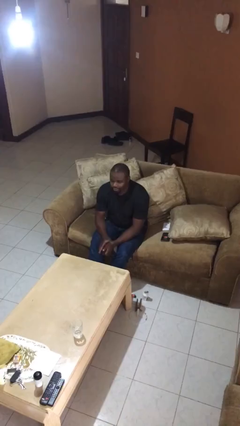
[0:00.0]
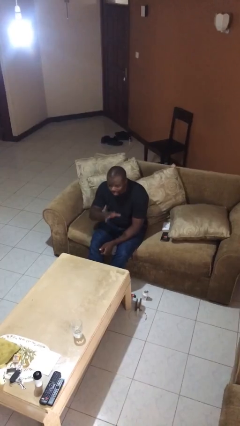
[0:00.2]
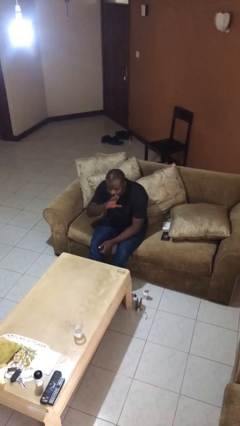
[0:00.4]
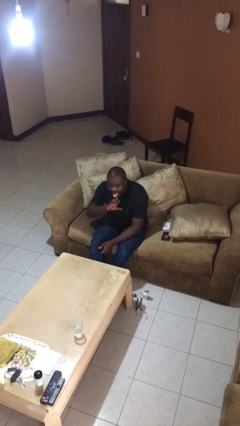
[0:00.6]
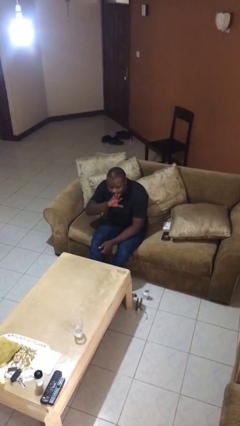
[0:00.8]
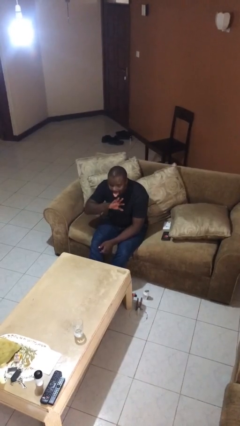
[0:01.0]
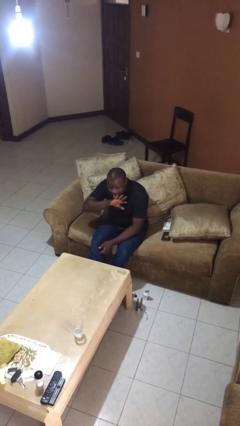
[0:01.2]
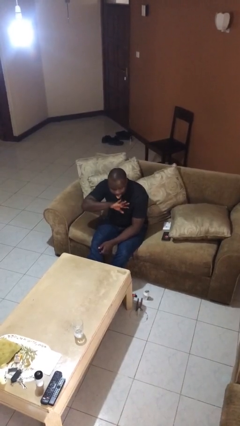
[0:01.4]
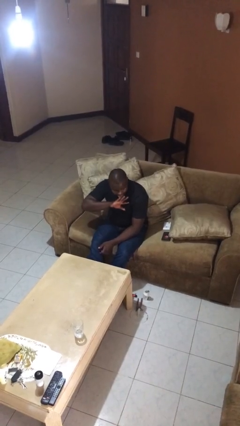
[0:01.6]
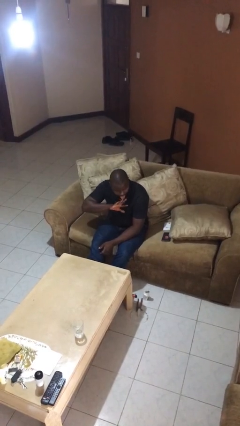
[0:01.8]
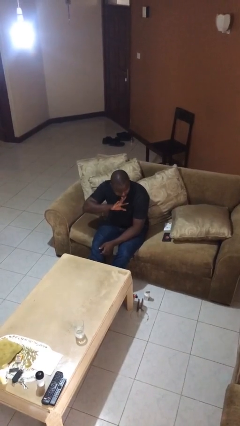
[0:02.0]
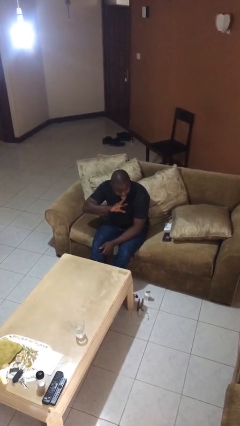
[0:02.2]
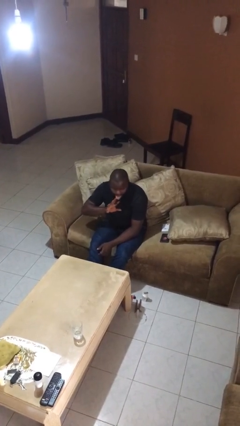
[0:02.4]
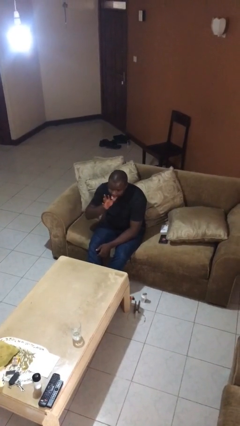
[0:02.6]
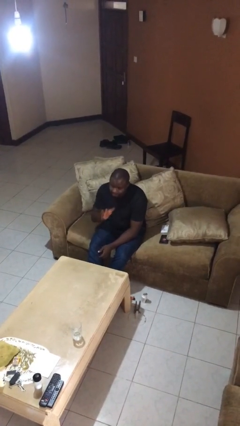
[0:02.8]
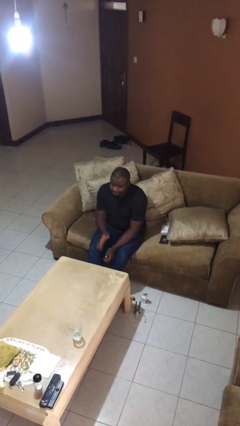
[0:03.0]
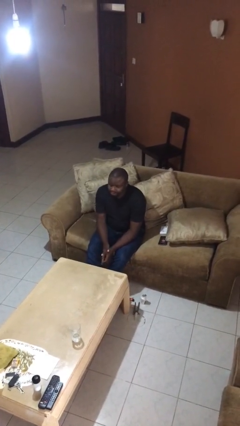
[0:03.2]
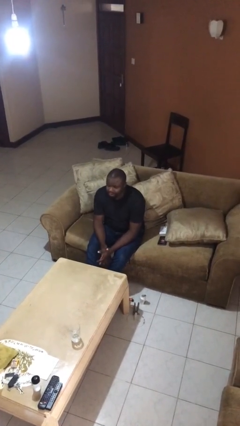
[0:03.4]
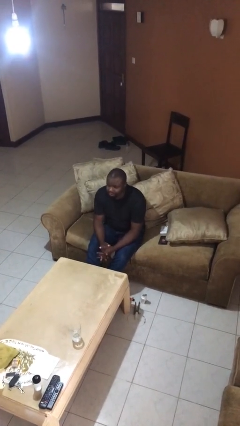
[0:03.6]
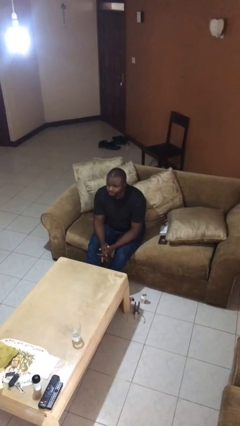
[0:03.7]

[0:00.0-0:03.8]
person licks fingers

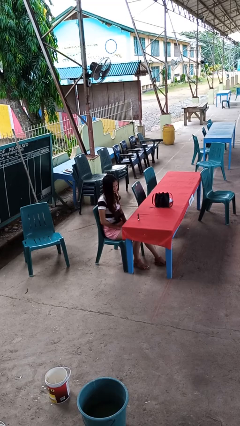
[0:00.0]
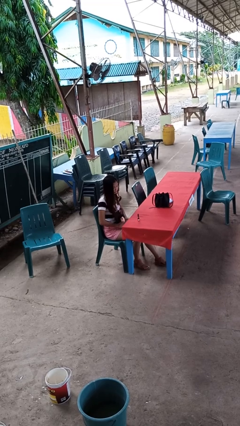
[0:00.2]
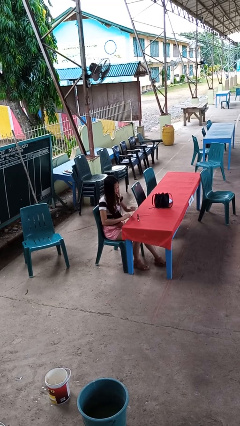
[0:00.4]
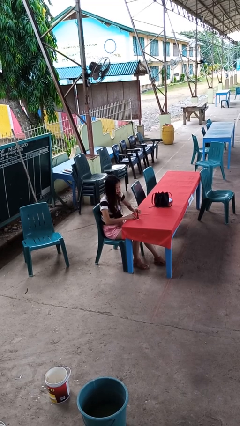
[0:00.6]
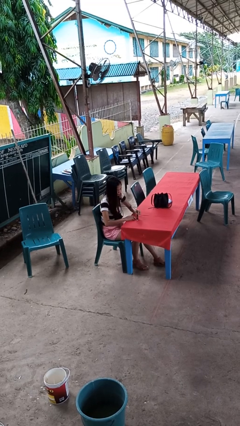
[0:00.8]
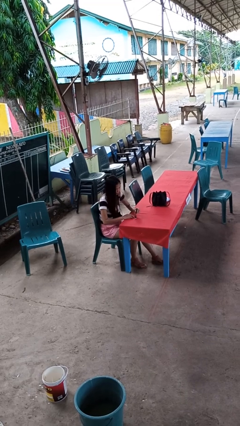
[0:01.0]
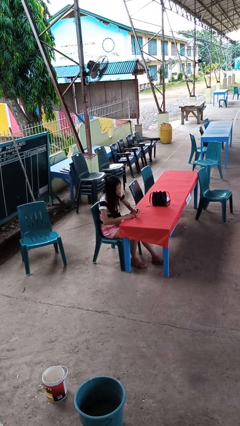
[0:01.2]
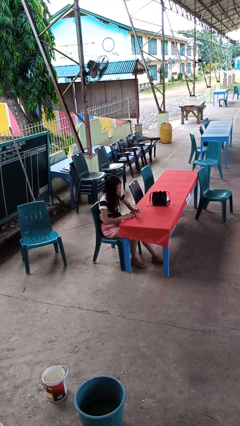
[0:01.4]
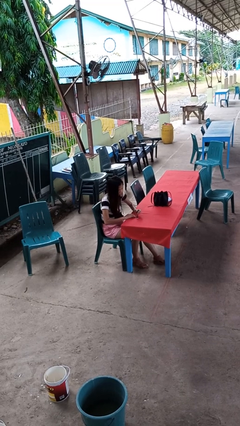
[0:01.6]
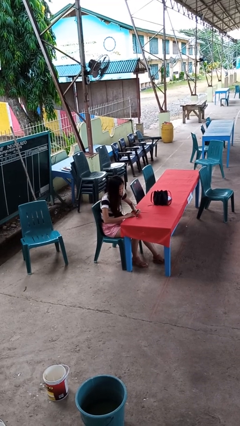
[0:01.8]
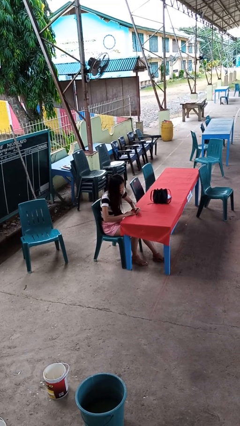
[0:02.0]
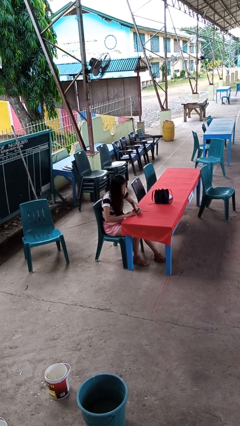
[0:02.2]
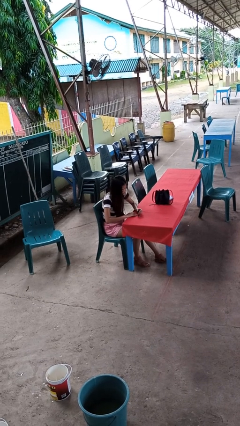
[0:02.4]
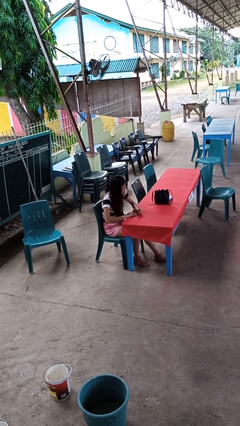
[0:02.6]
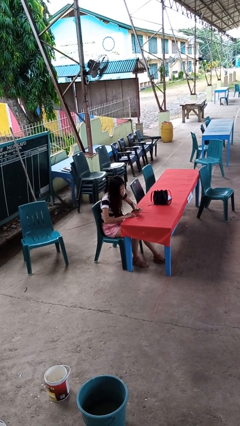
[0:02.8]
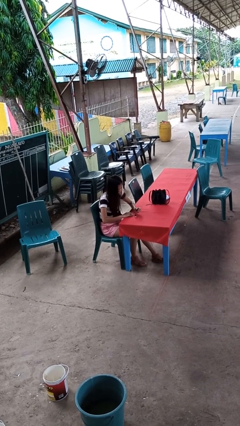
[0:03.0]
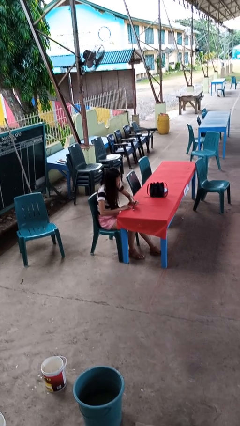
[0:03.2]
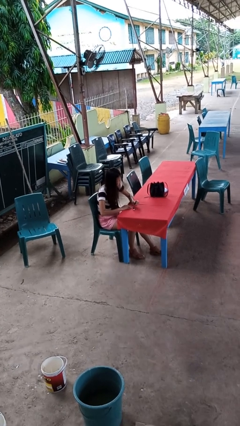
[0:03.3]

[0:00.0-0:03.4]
person paints fingernails

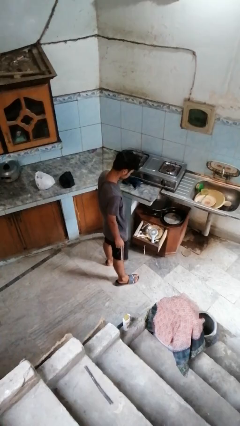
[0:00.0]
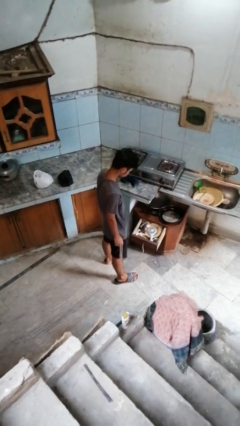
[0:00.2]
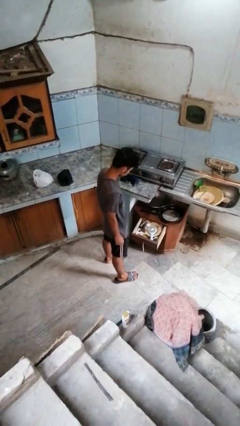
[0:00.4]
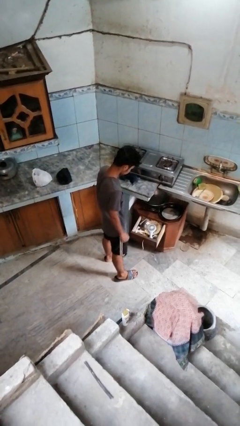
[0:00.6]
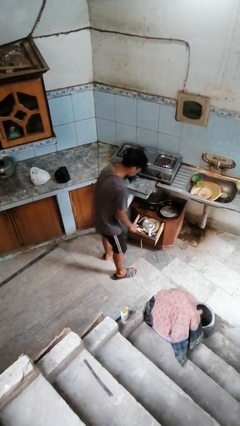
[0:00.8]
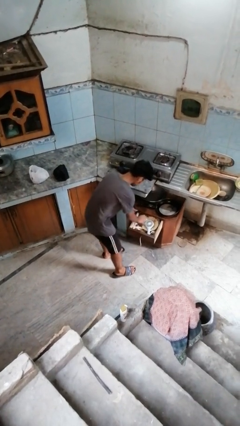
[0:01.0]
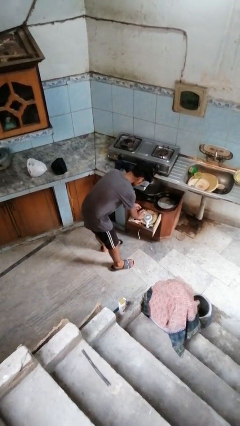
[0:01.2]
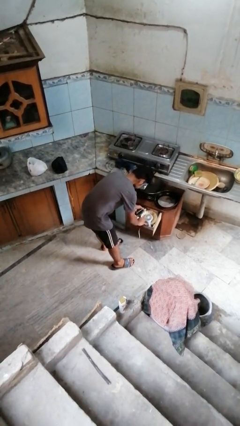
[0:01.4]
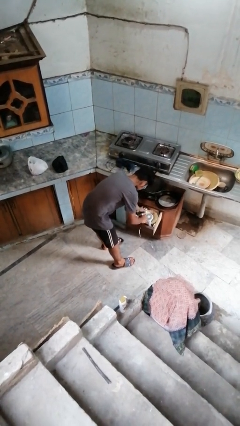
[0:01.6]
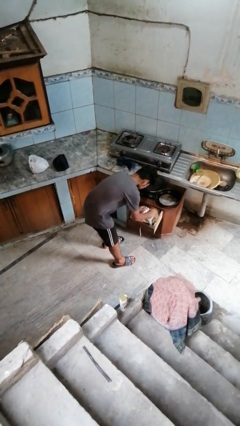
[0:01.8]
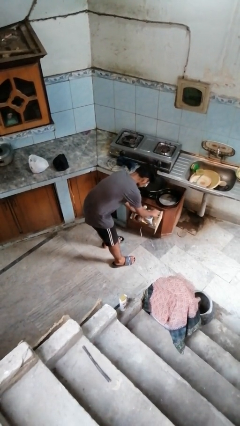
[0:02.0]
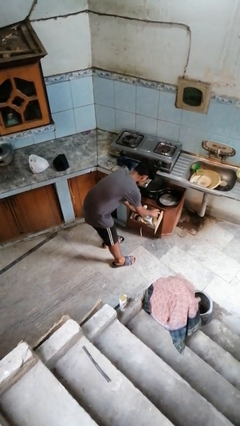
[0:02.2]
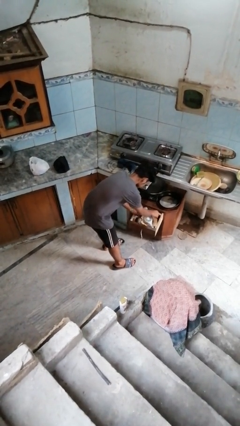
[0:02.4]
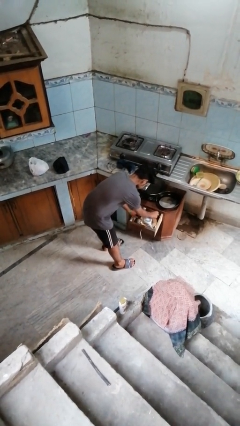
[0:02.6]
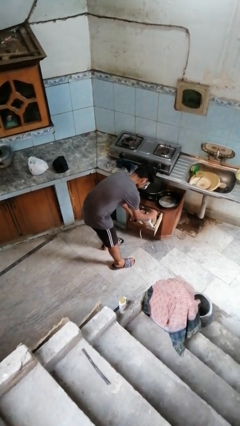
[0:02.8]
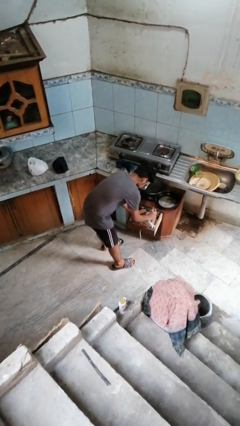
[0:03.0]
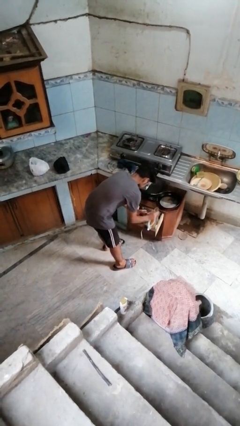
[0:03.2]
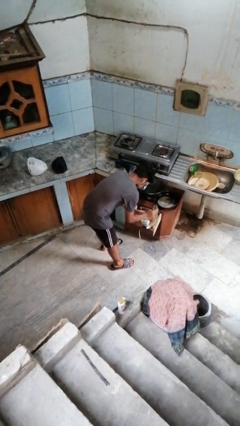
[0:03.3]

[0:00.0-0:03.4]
person searches in kitchen drawer

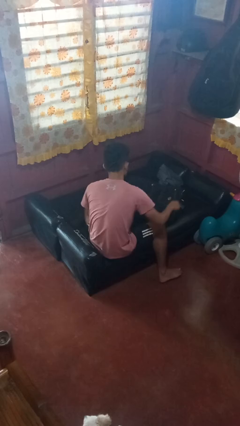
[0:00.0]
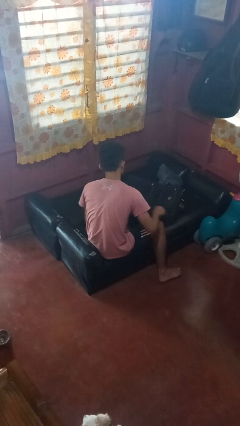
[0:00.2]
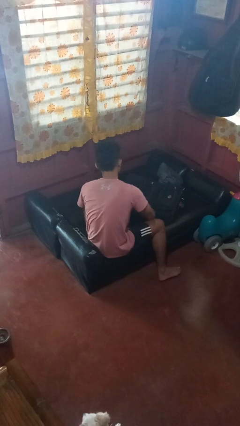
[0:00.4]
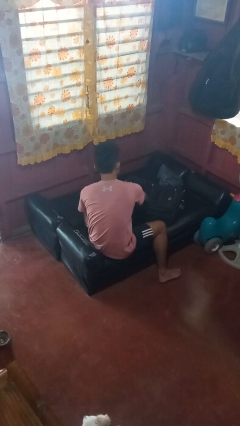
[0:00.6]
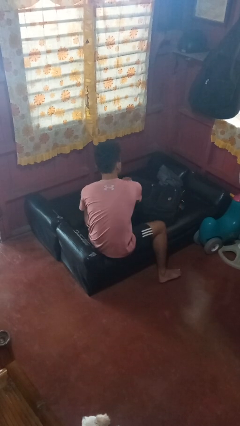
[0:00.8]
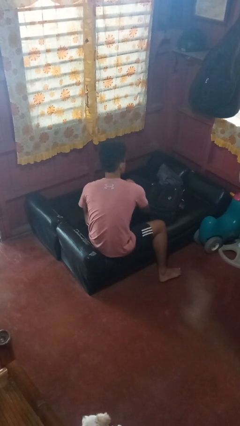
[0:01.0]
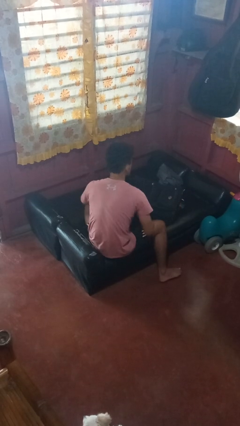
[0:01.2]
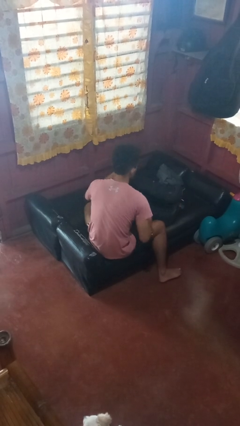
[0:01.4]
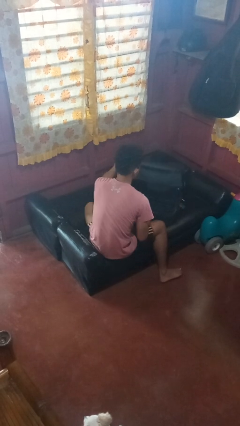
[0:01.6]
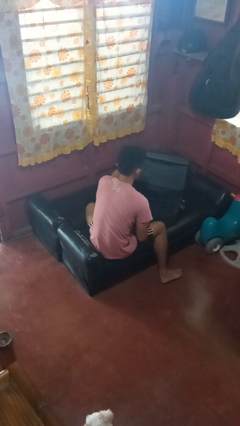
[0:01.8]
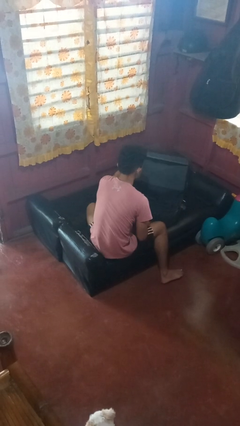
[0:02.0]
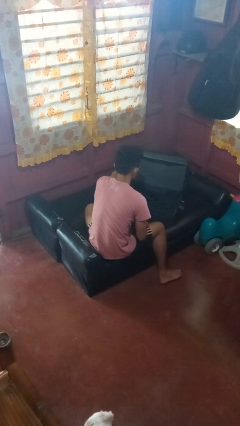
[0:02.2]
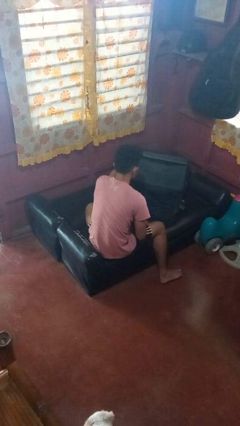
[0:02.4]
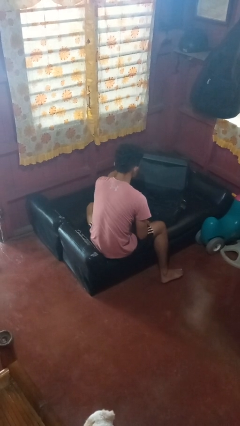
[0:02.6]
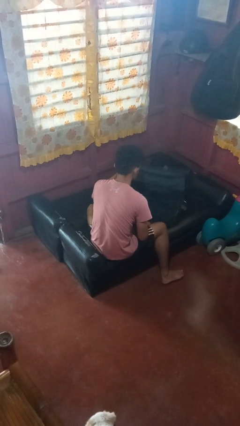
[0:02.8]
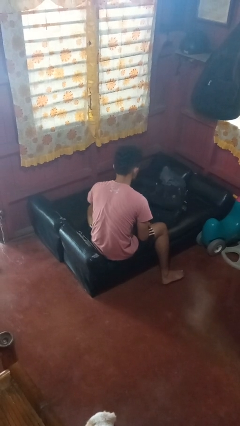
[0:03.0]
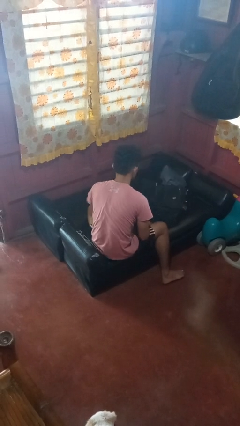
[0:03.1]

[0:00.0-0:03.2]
person opens suitcase

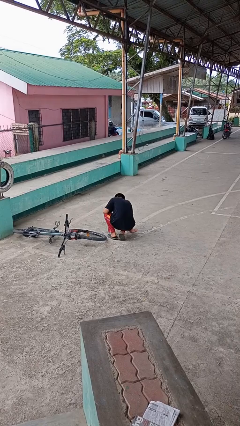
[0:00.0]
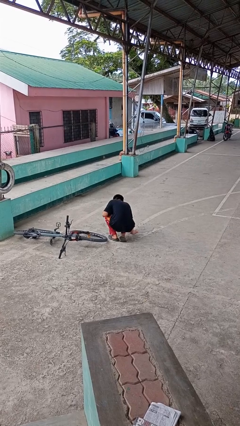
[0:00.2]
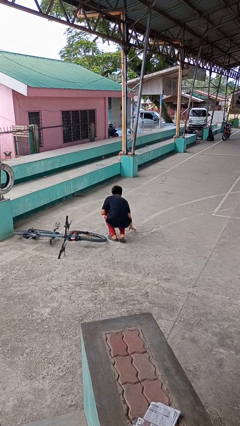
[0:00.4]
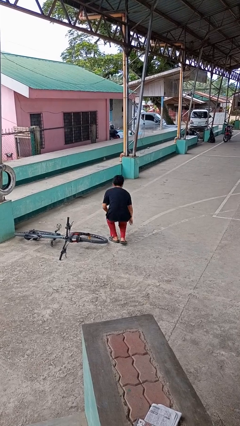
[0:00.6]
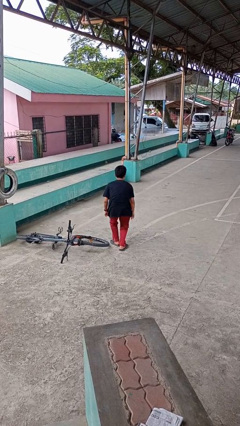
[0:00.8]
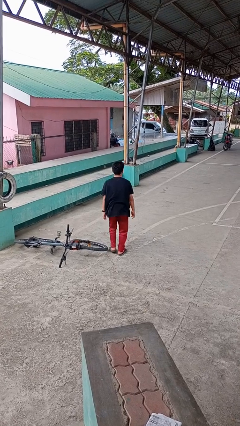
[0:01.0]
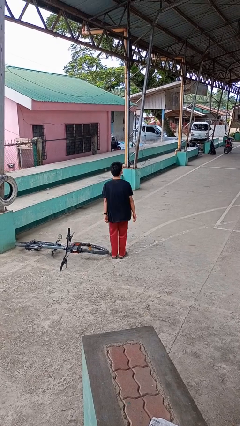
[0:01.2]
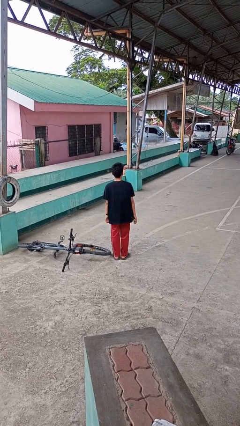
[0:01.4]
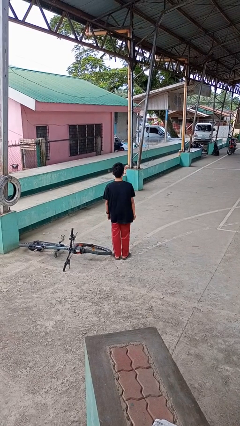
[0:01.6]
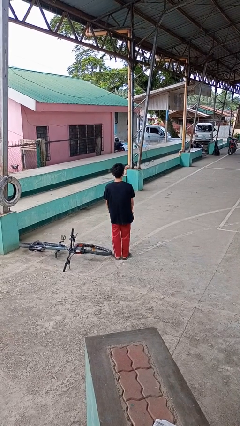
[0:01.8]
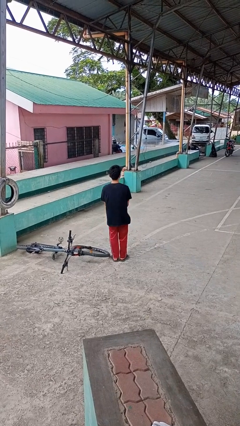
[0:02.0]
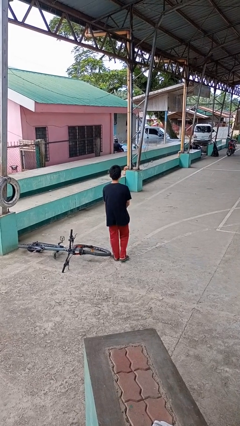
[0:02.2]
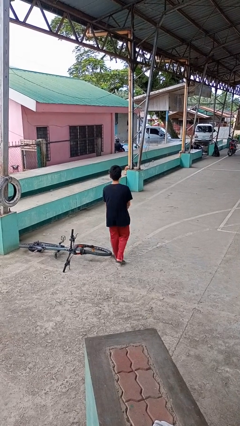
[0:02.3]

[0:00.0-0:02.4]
person stands up from floor

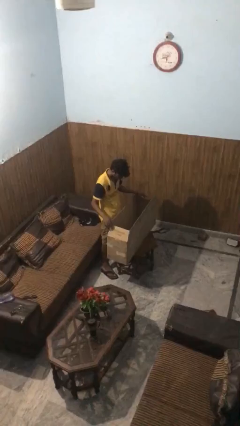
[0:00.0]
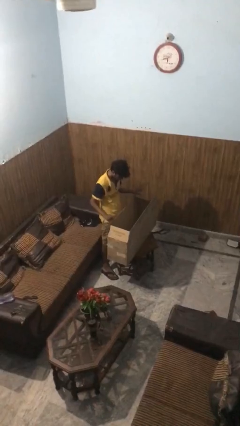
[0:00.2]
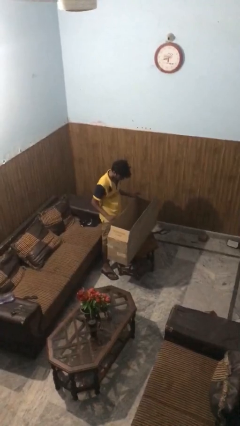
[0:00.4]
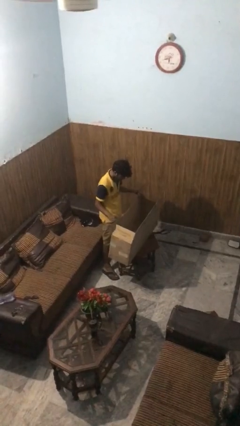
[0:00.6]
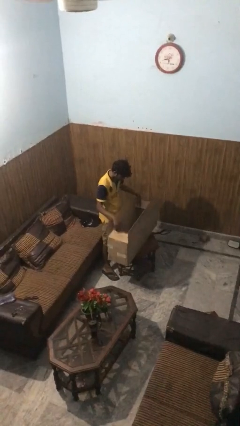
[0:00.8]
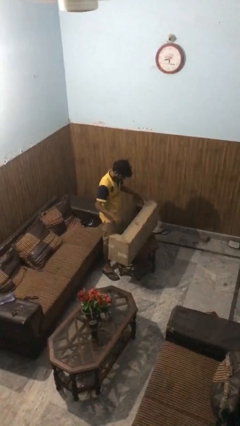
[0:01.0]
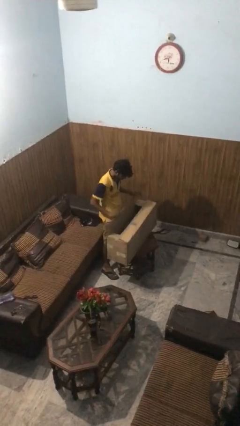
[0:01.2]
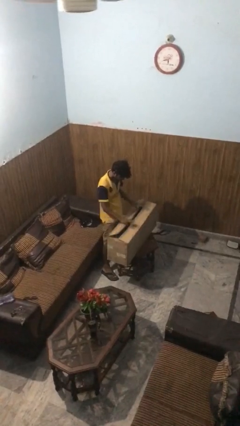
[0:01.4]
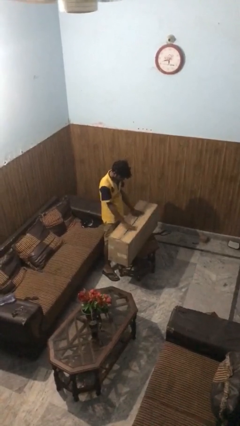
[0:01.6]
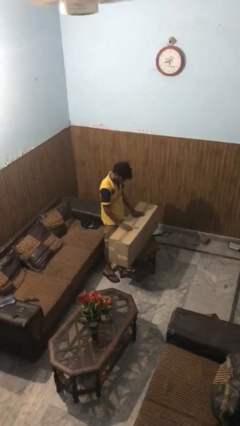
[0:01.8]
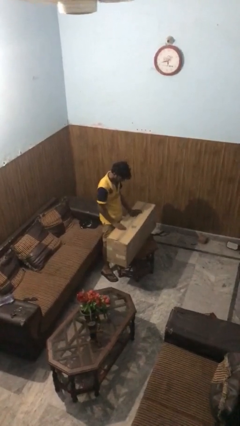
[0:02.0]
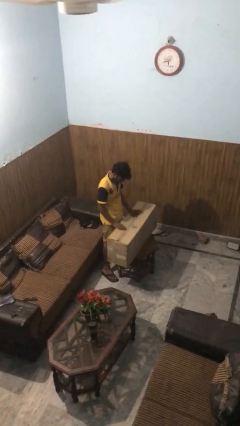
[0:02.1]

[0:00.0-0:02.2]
person closes box
